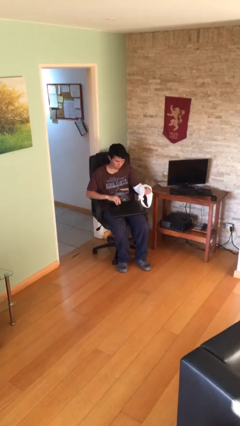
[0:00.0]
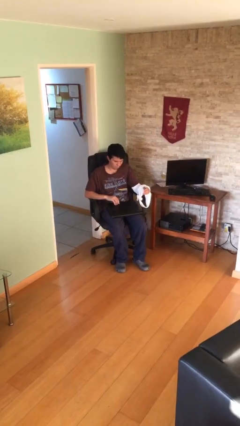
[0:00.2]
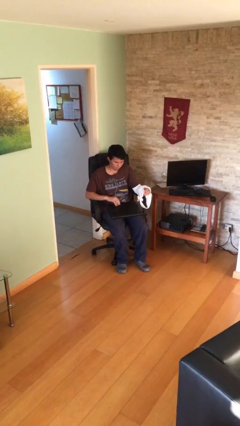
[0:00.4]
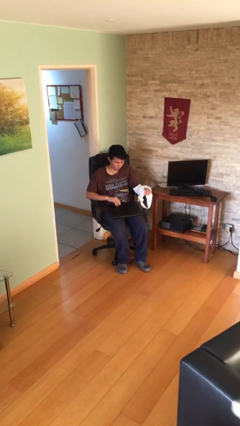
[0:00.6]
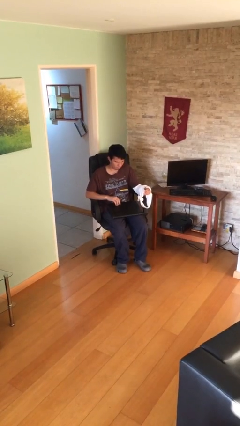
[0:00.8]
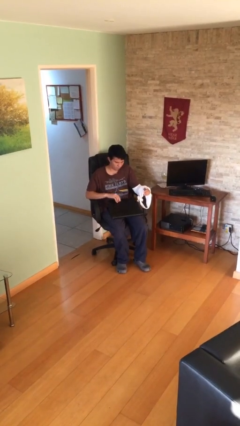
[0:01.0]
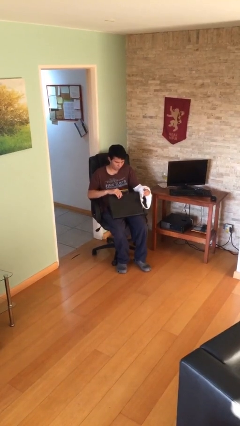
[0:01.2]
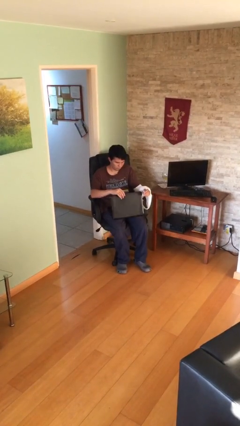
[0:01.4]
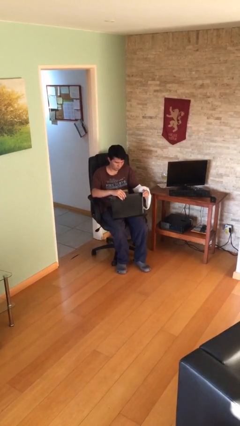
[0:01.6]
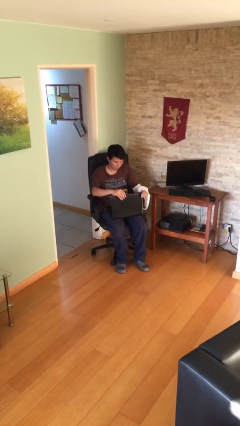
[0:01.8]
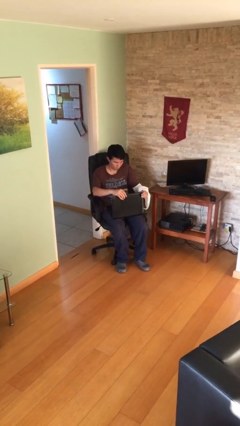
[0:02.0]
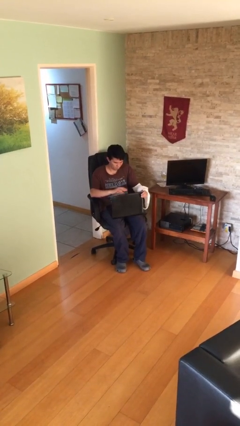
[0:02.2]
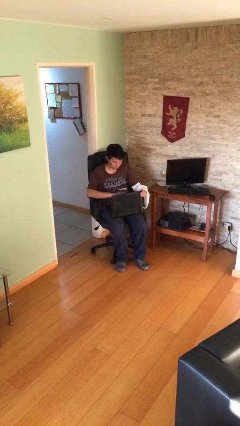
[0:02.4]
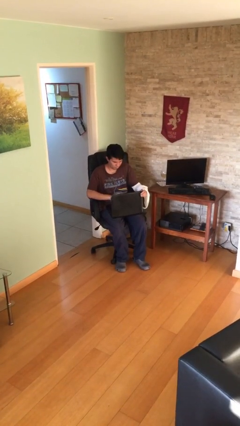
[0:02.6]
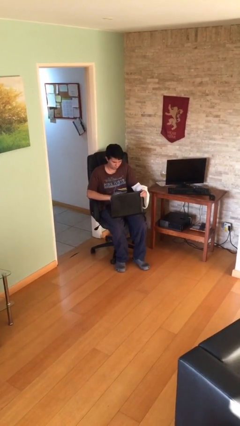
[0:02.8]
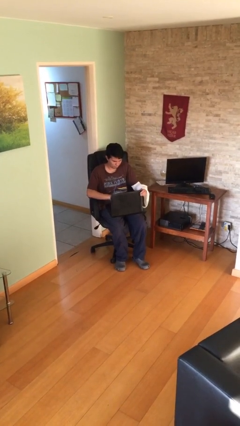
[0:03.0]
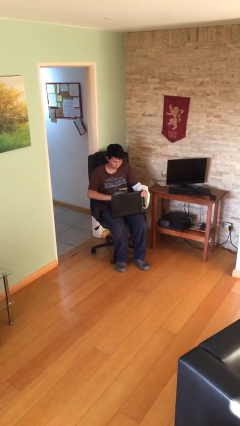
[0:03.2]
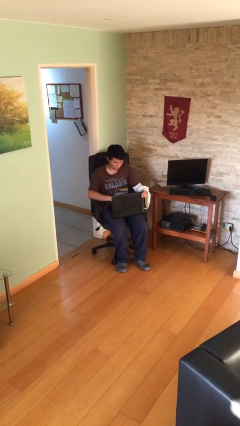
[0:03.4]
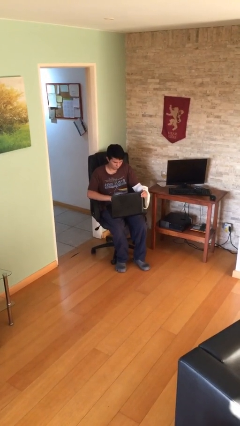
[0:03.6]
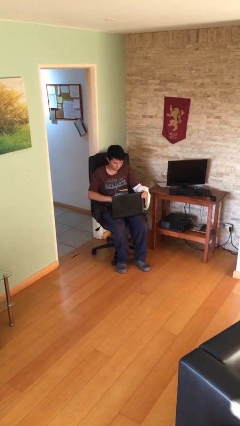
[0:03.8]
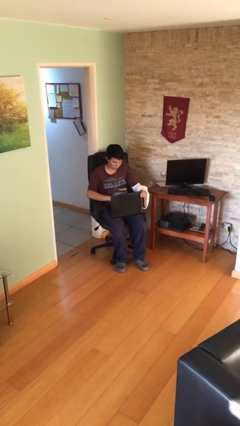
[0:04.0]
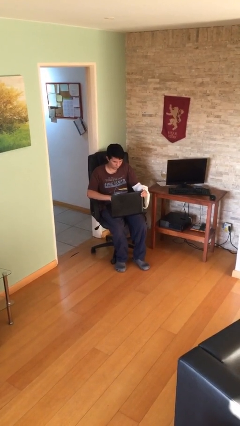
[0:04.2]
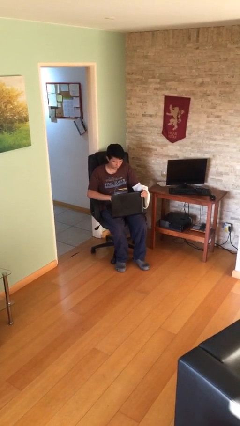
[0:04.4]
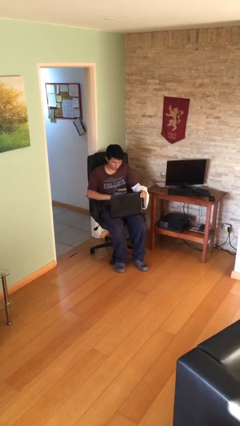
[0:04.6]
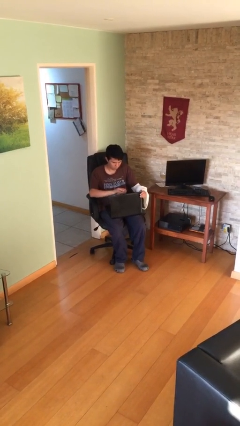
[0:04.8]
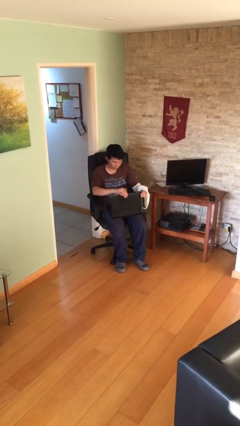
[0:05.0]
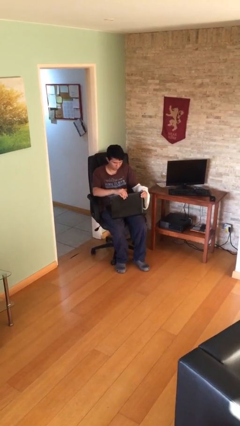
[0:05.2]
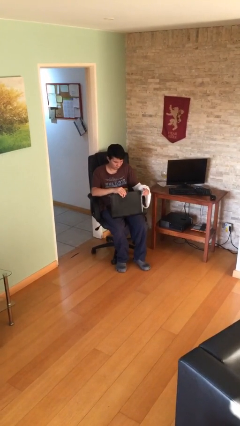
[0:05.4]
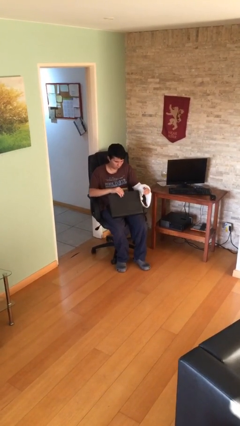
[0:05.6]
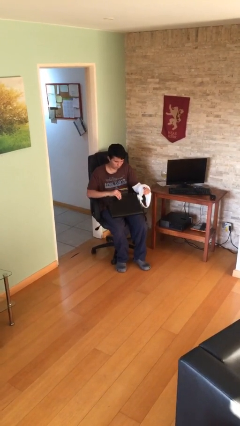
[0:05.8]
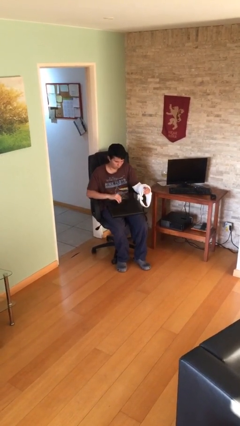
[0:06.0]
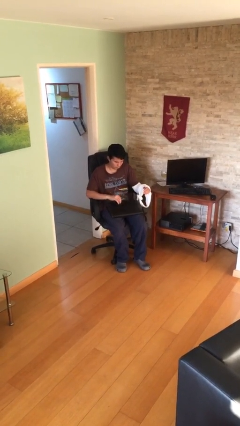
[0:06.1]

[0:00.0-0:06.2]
person interacts with laptop

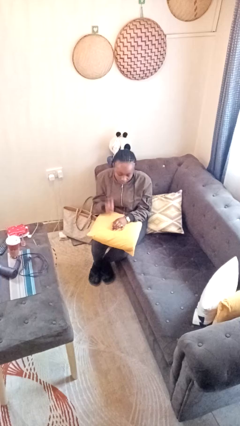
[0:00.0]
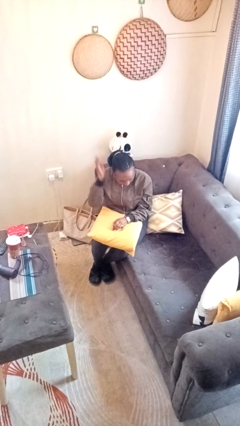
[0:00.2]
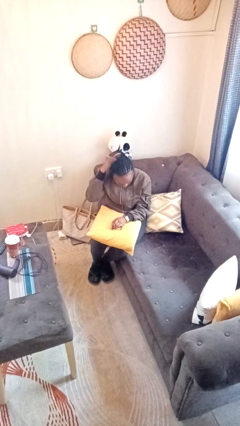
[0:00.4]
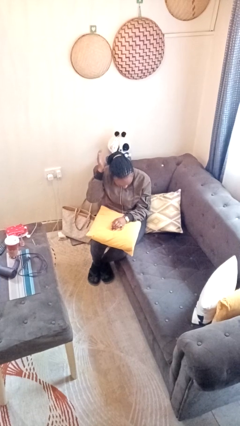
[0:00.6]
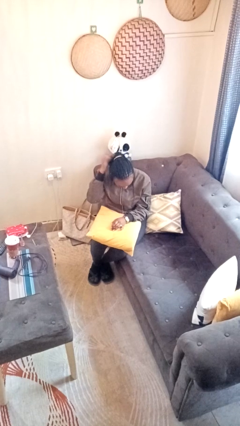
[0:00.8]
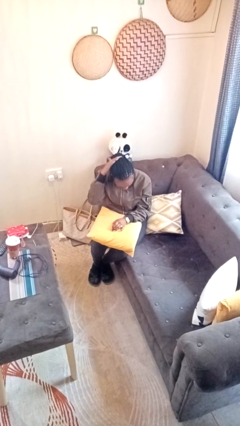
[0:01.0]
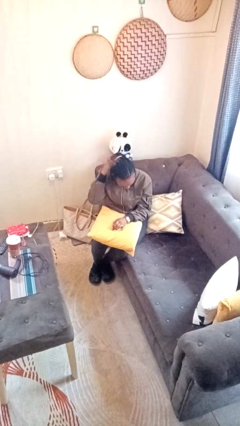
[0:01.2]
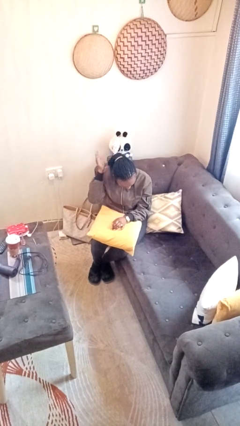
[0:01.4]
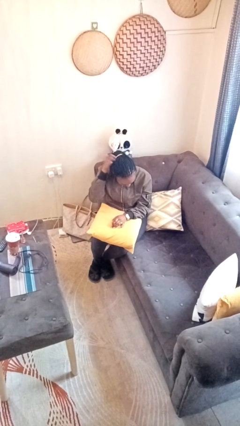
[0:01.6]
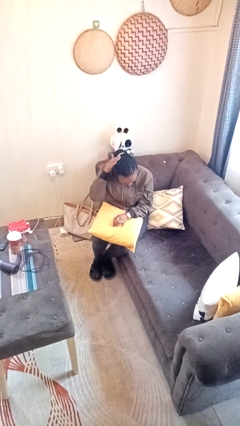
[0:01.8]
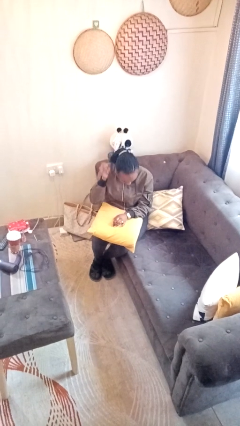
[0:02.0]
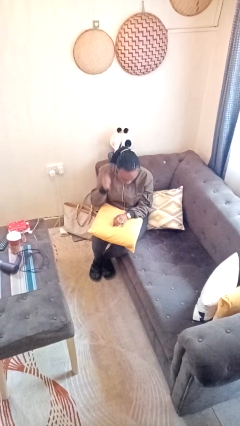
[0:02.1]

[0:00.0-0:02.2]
person pats head

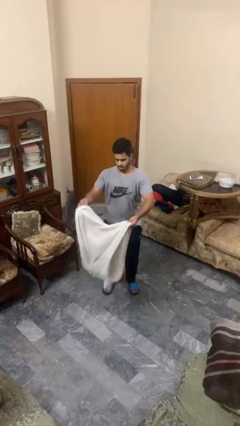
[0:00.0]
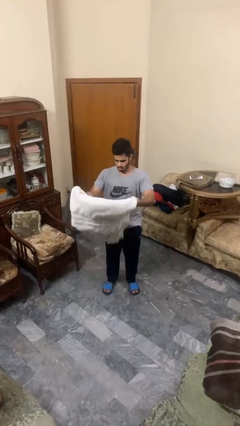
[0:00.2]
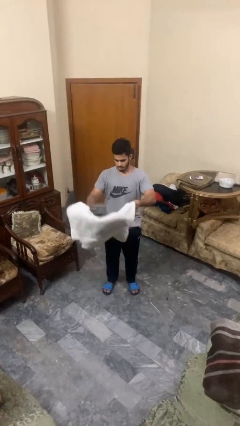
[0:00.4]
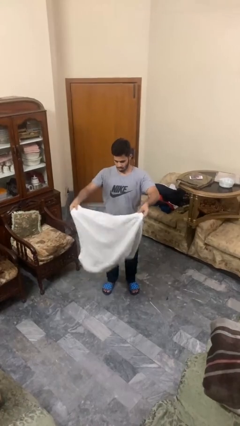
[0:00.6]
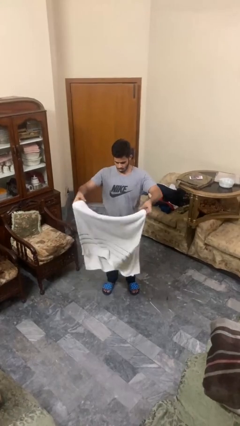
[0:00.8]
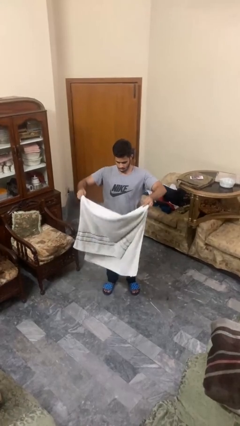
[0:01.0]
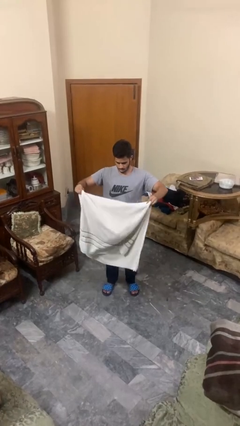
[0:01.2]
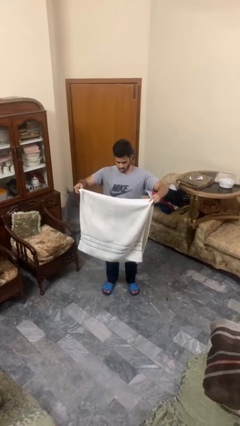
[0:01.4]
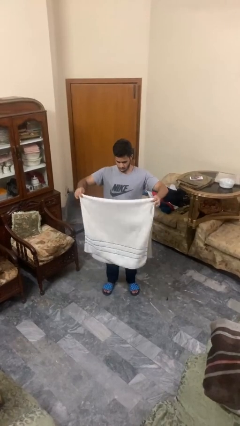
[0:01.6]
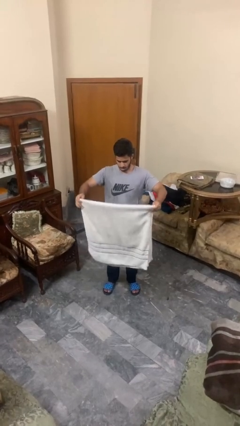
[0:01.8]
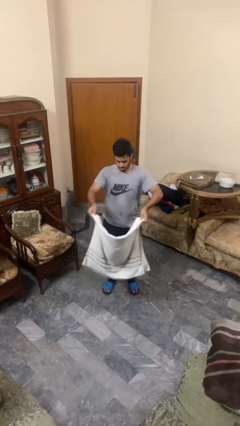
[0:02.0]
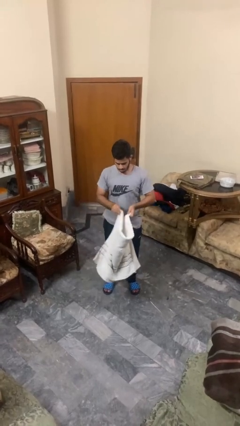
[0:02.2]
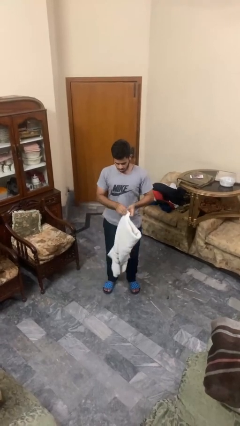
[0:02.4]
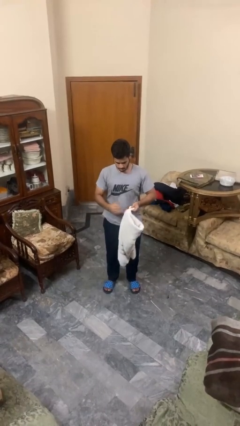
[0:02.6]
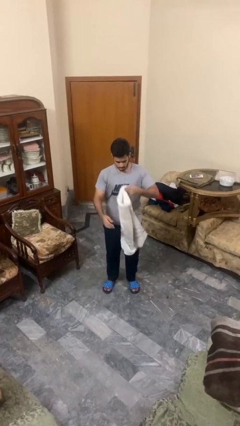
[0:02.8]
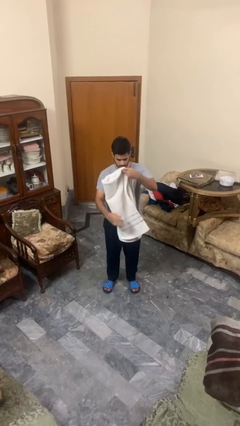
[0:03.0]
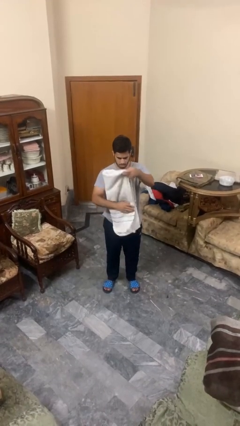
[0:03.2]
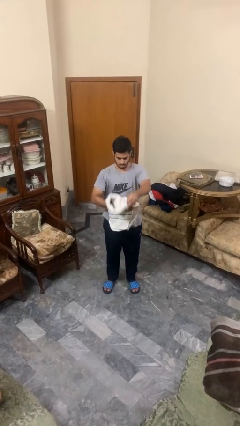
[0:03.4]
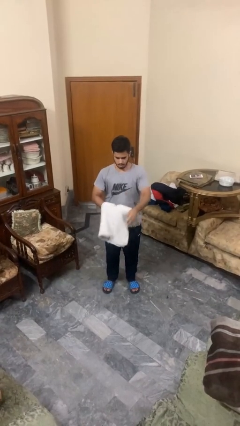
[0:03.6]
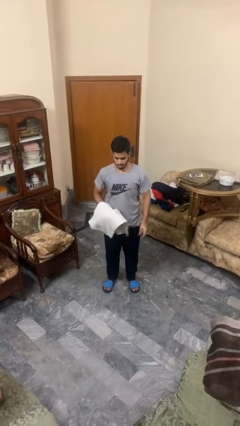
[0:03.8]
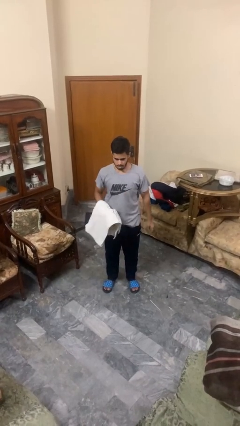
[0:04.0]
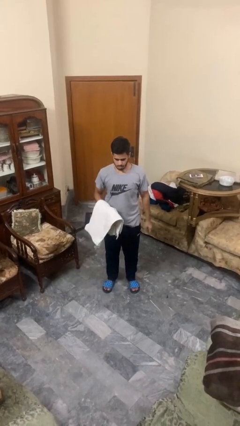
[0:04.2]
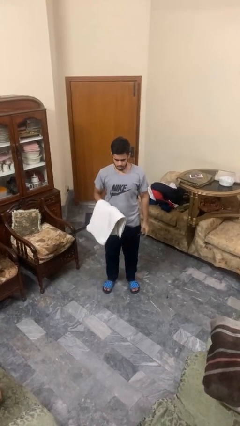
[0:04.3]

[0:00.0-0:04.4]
person folds towel

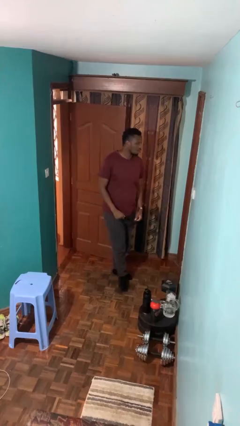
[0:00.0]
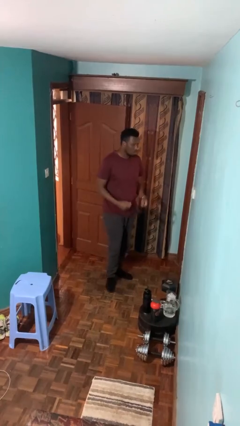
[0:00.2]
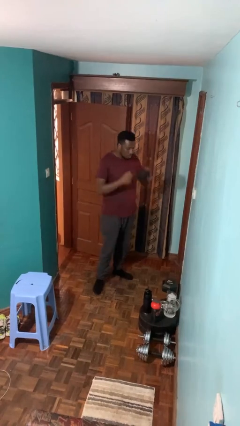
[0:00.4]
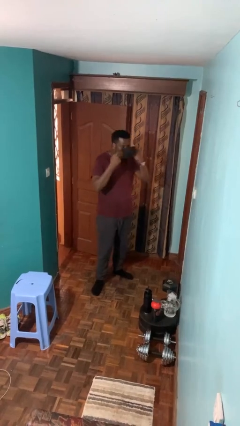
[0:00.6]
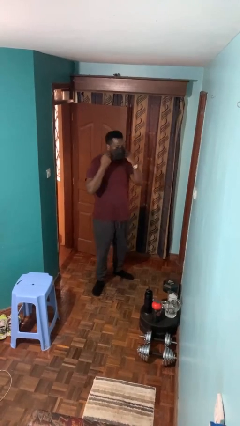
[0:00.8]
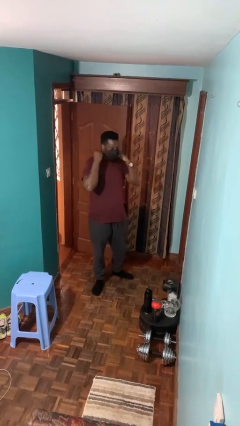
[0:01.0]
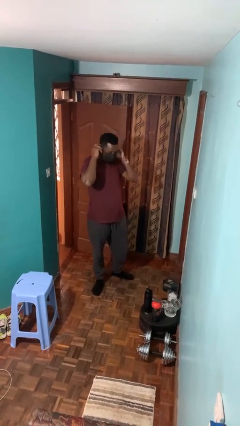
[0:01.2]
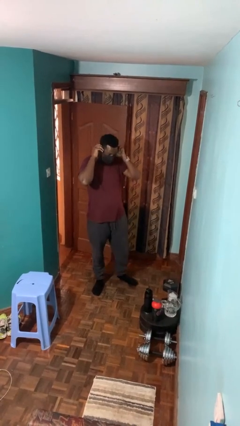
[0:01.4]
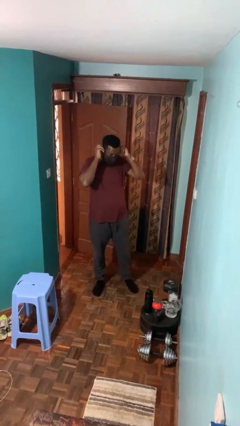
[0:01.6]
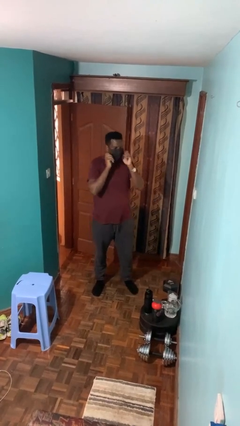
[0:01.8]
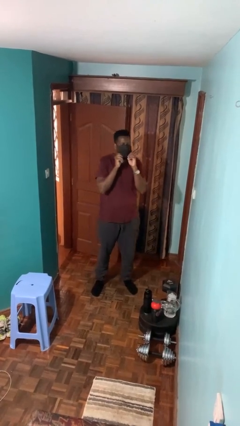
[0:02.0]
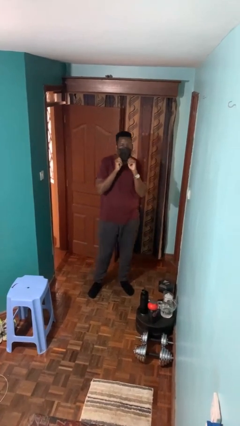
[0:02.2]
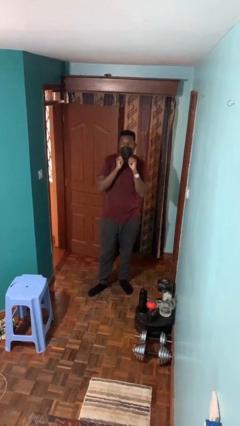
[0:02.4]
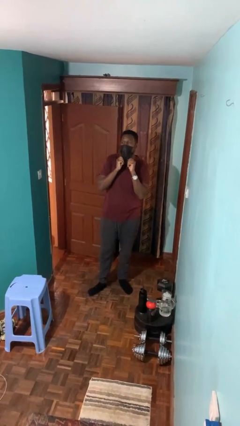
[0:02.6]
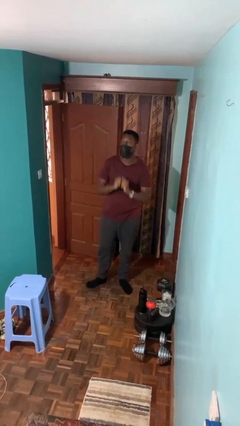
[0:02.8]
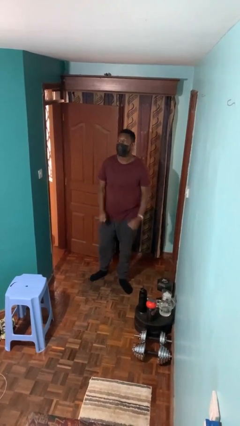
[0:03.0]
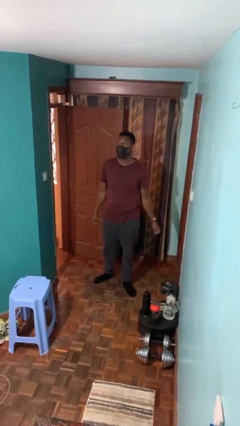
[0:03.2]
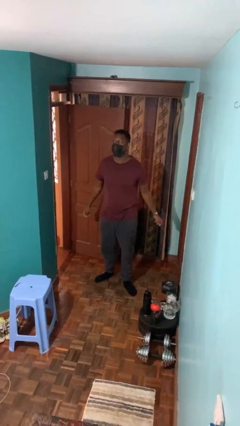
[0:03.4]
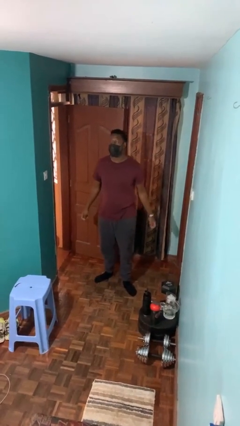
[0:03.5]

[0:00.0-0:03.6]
person puts on facemask

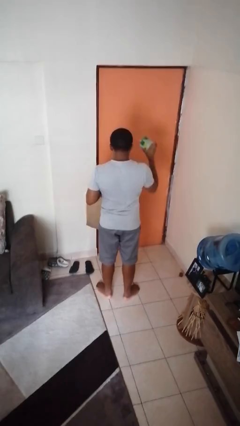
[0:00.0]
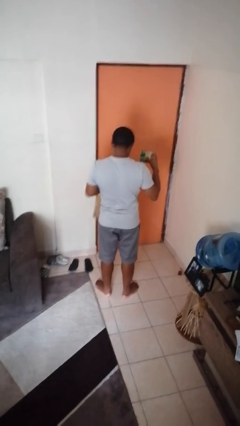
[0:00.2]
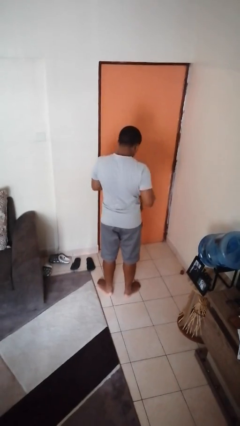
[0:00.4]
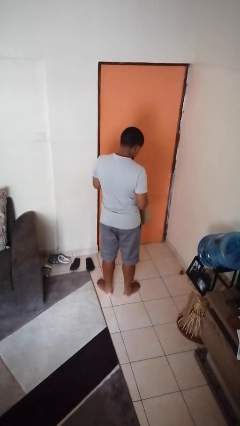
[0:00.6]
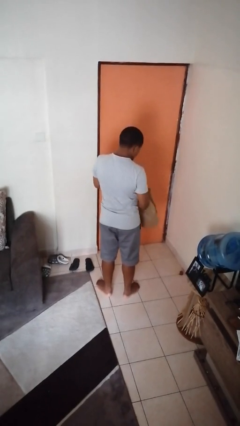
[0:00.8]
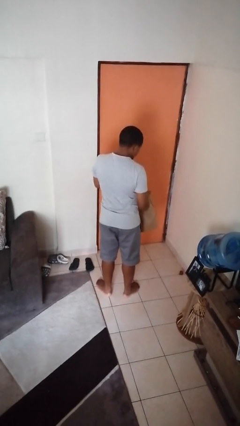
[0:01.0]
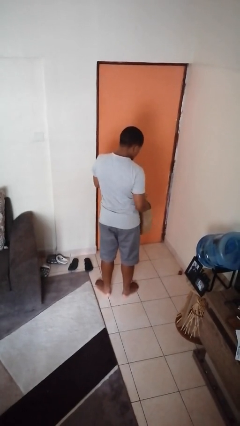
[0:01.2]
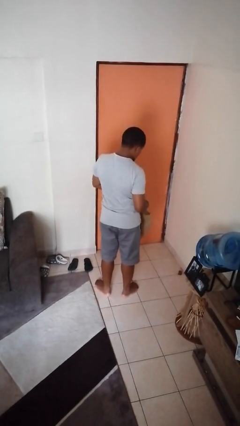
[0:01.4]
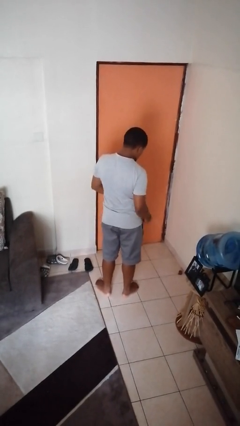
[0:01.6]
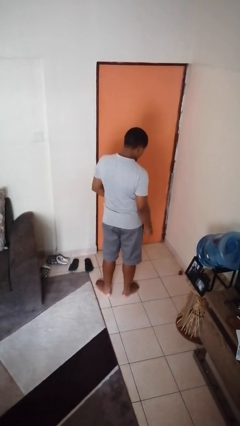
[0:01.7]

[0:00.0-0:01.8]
person puts object into bag
